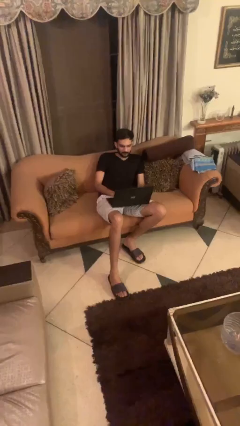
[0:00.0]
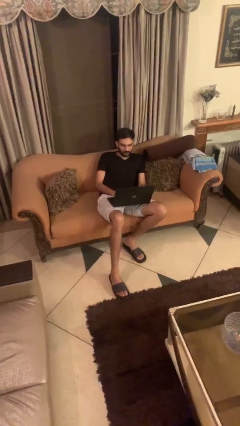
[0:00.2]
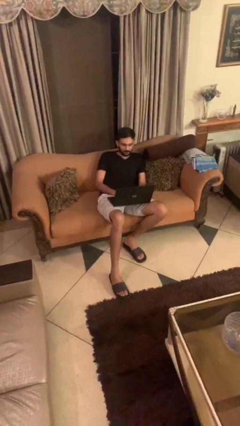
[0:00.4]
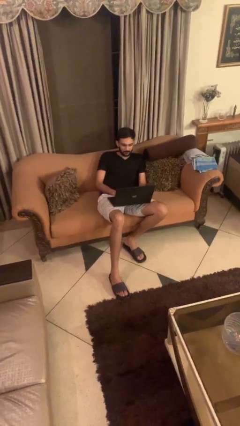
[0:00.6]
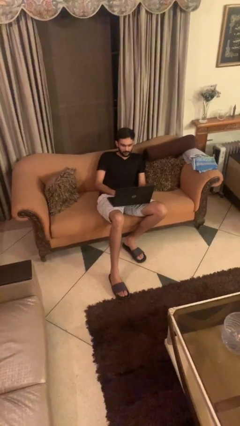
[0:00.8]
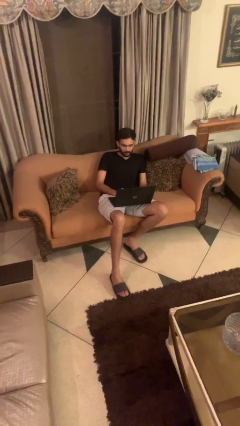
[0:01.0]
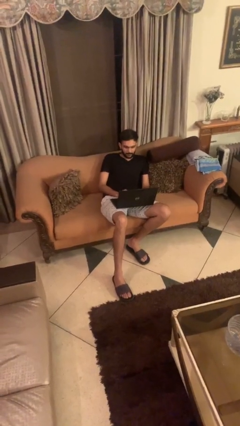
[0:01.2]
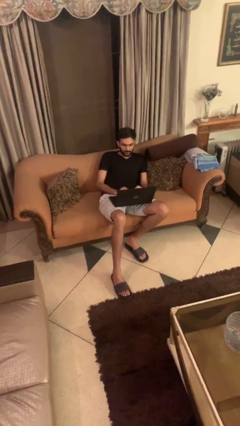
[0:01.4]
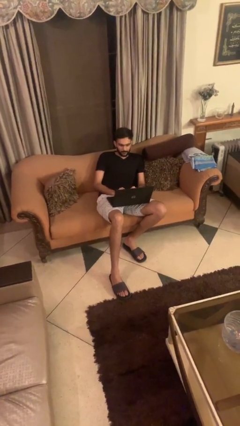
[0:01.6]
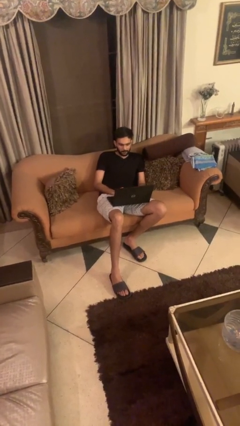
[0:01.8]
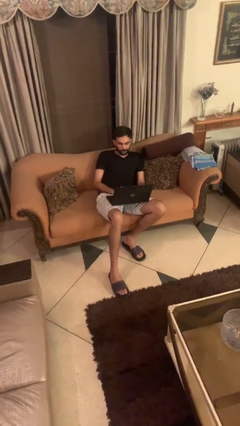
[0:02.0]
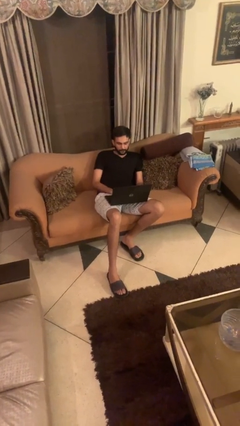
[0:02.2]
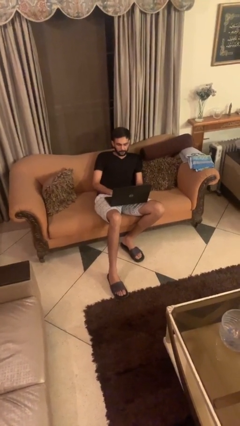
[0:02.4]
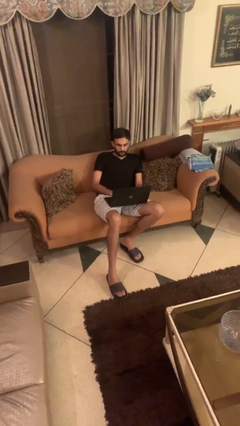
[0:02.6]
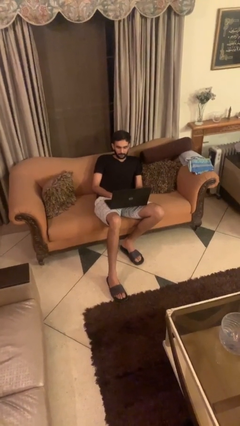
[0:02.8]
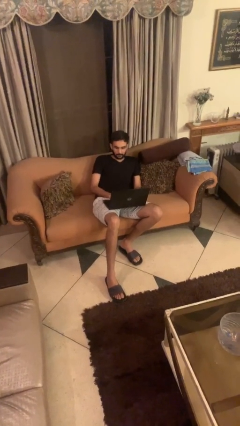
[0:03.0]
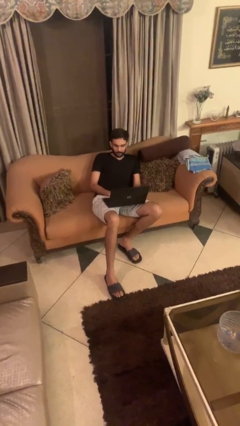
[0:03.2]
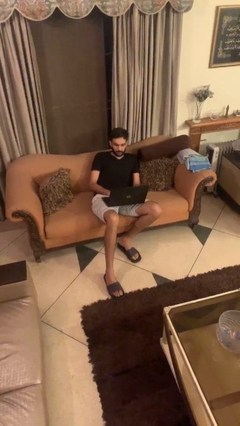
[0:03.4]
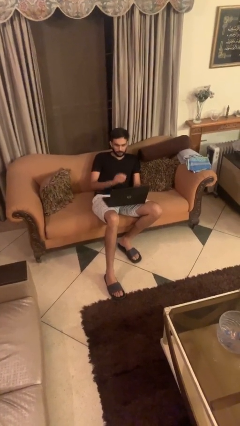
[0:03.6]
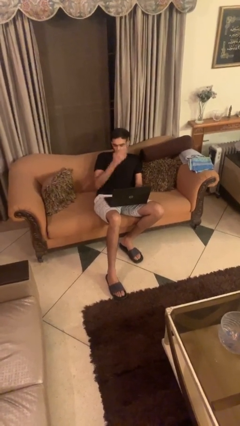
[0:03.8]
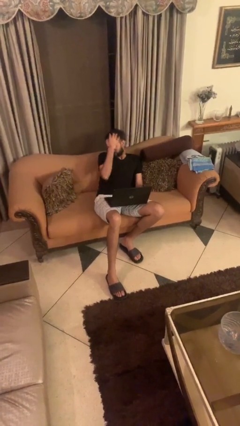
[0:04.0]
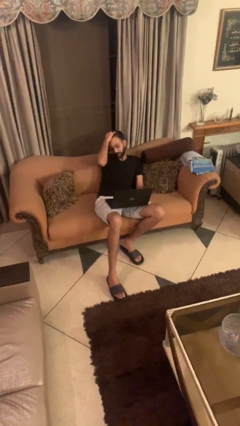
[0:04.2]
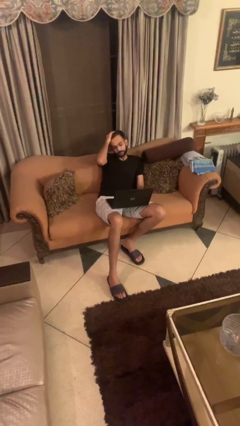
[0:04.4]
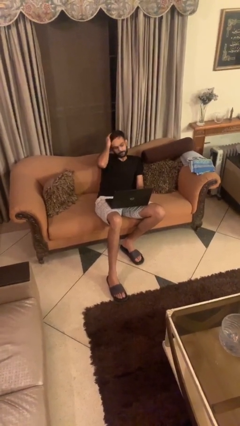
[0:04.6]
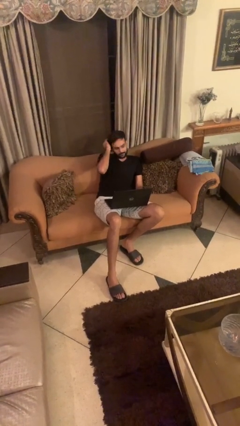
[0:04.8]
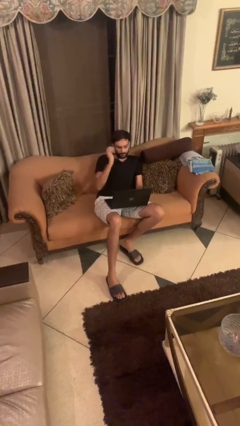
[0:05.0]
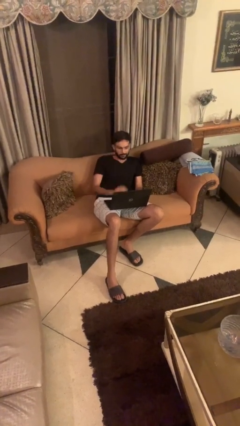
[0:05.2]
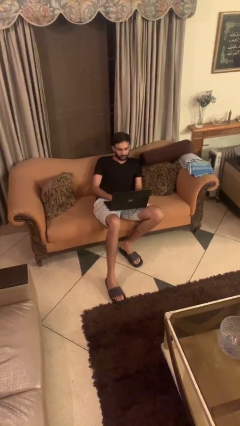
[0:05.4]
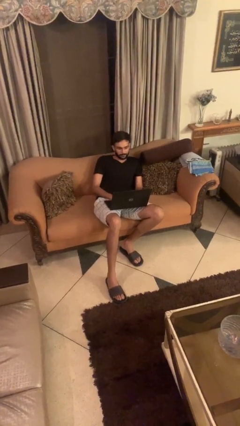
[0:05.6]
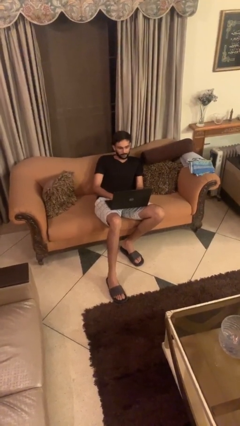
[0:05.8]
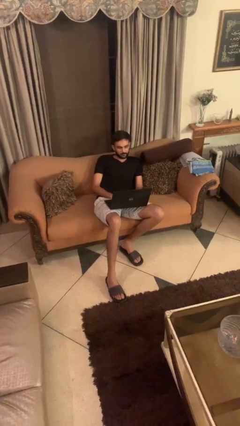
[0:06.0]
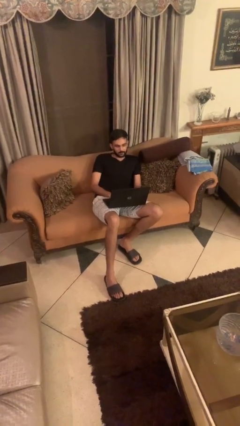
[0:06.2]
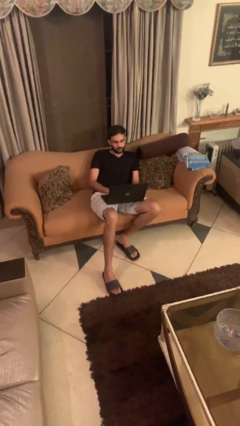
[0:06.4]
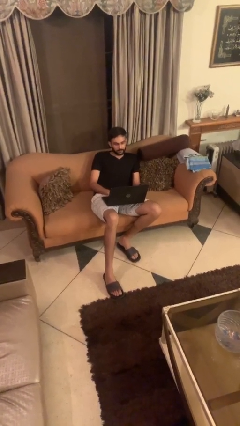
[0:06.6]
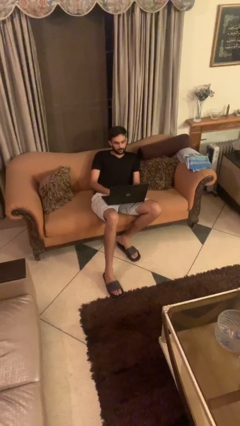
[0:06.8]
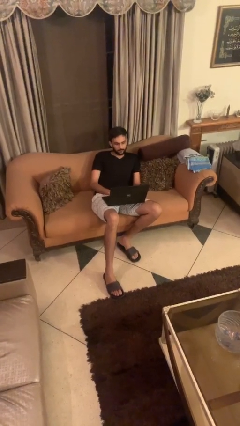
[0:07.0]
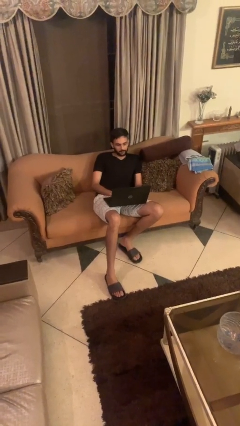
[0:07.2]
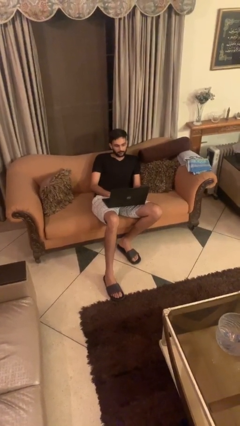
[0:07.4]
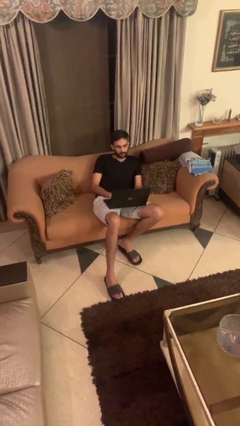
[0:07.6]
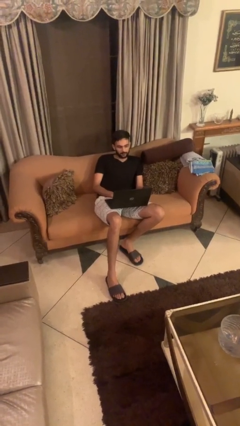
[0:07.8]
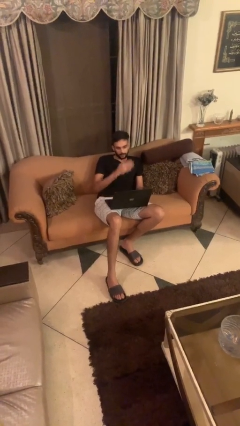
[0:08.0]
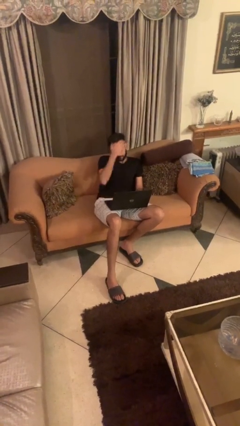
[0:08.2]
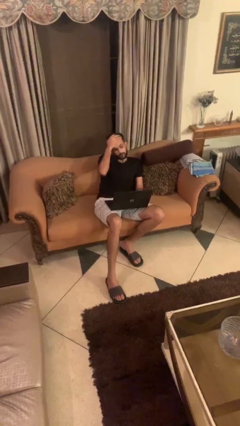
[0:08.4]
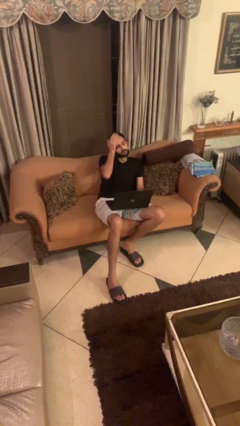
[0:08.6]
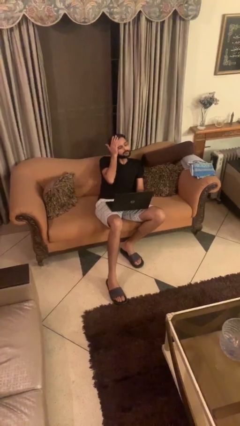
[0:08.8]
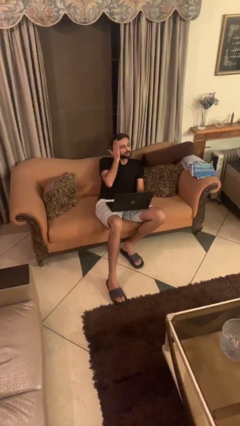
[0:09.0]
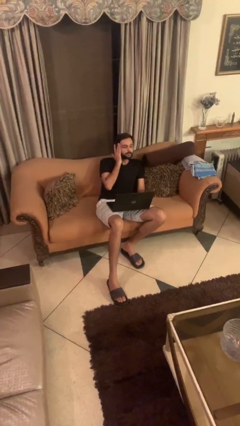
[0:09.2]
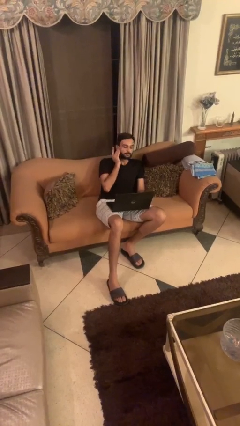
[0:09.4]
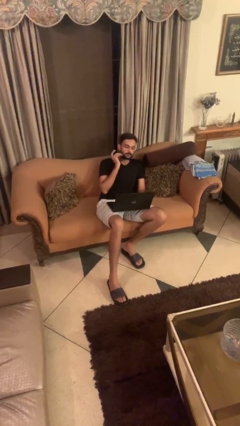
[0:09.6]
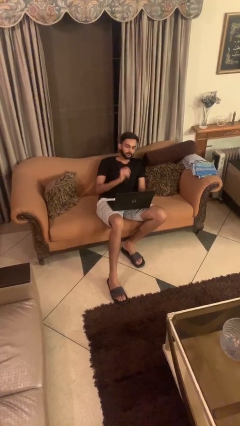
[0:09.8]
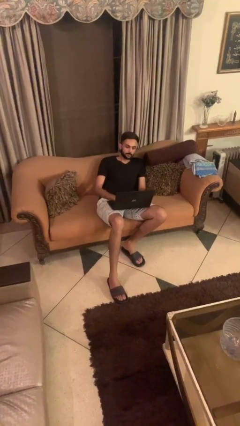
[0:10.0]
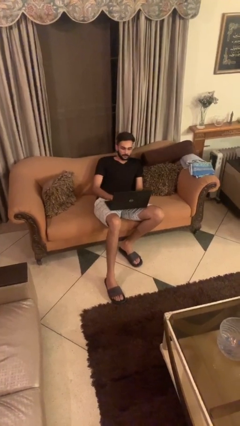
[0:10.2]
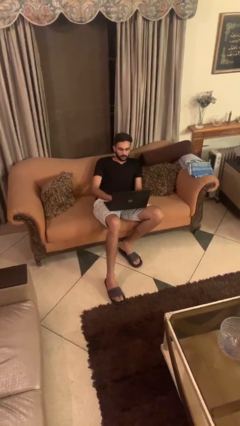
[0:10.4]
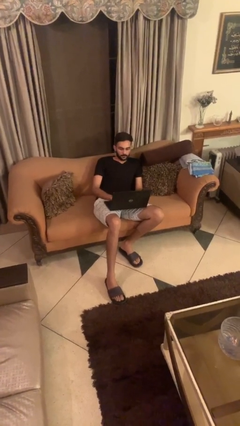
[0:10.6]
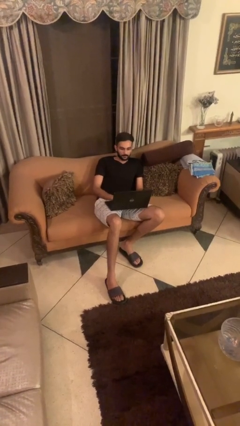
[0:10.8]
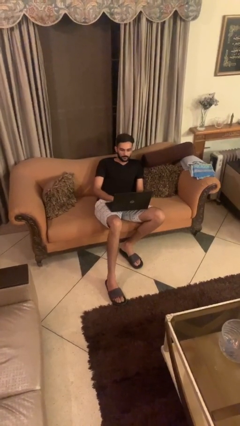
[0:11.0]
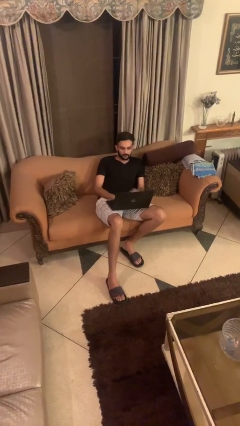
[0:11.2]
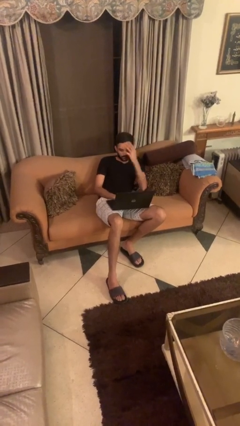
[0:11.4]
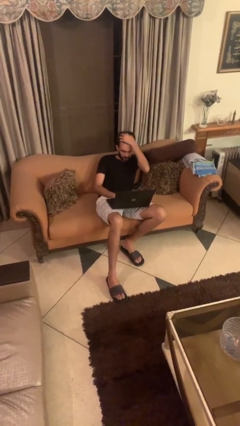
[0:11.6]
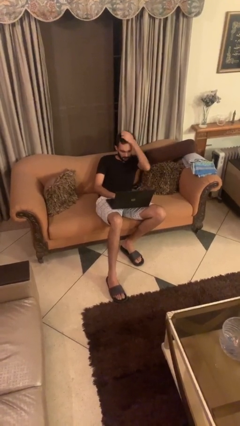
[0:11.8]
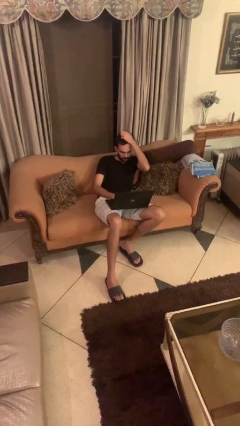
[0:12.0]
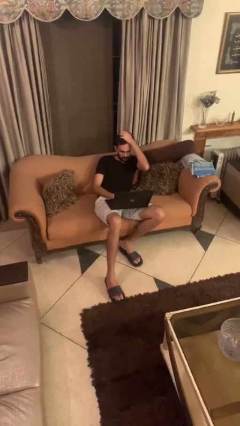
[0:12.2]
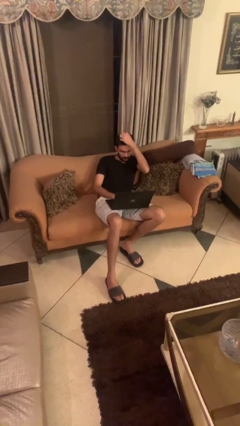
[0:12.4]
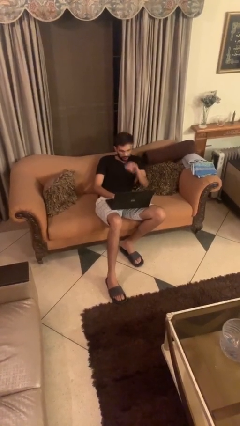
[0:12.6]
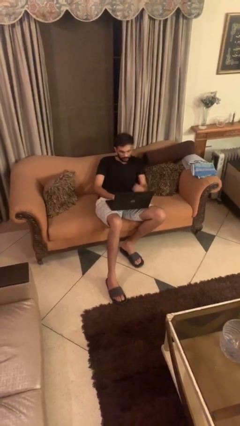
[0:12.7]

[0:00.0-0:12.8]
person interacts with laptop

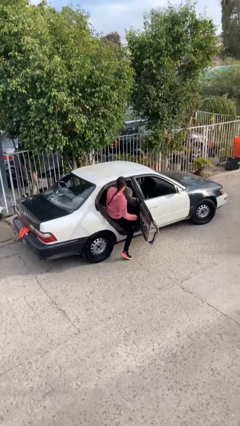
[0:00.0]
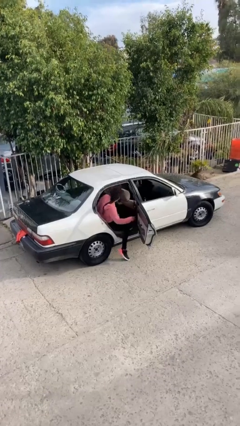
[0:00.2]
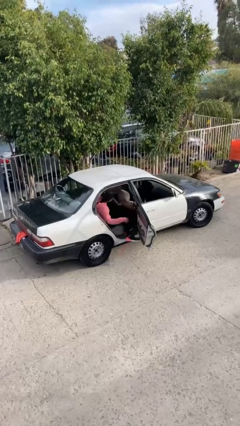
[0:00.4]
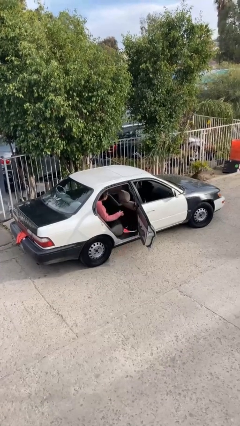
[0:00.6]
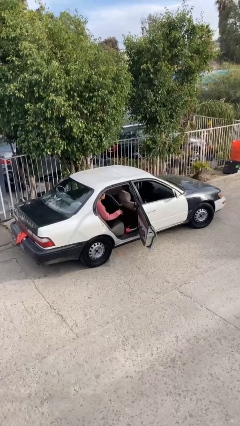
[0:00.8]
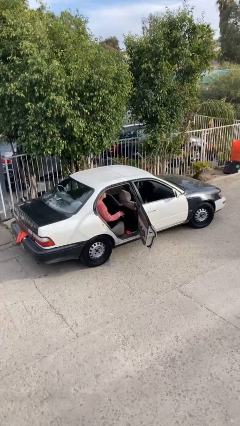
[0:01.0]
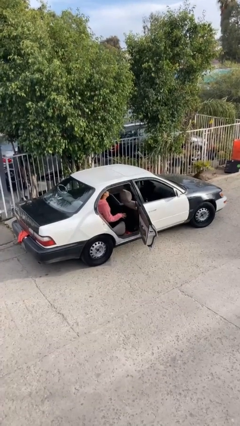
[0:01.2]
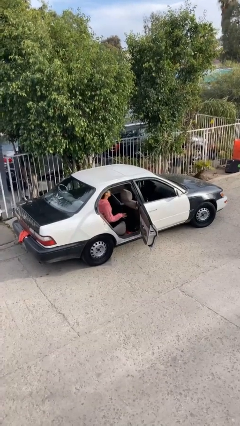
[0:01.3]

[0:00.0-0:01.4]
person enters car

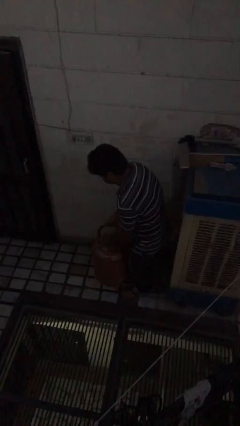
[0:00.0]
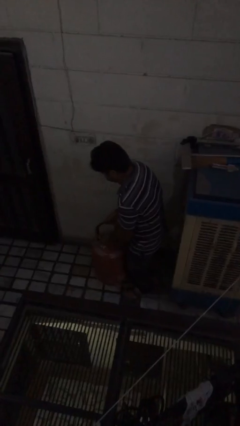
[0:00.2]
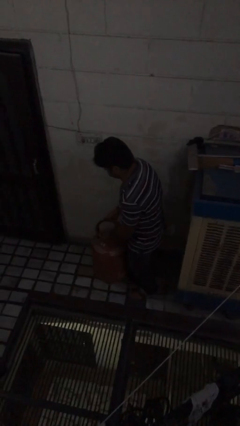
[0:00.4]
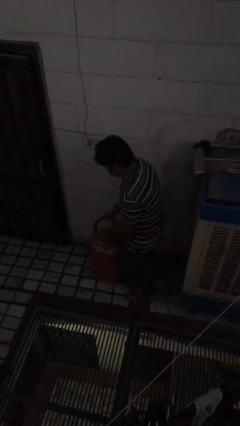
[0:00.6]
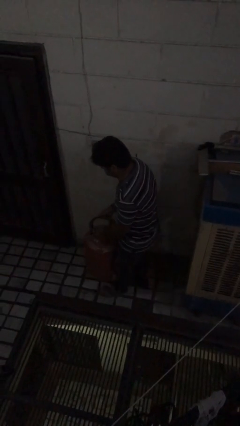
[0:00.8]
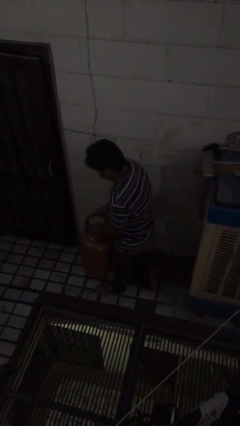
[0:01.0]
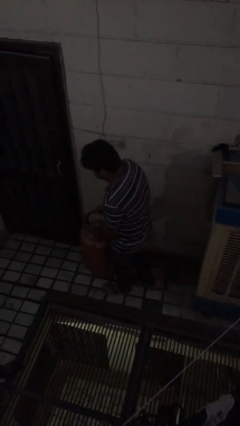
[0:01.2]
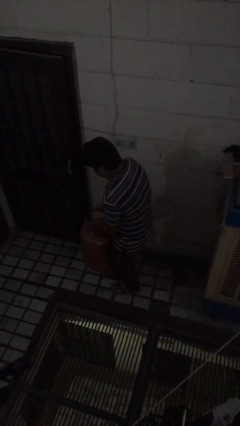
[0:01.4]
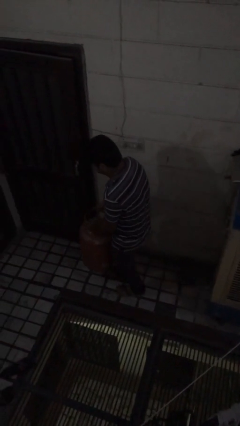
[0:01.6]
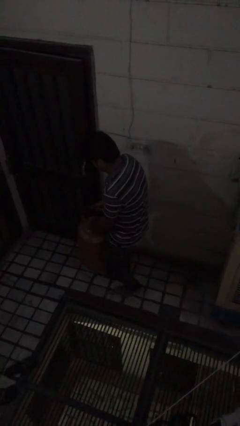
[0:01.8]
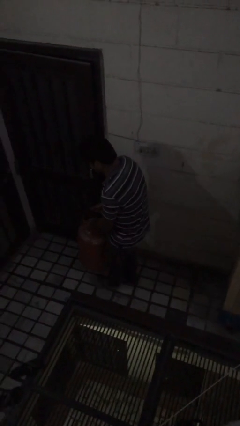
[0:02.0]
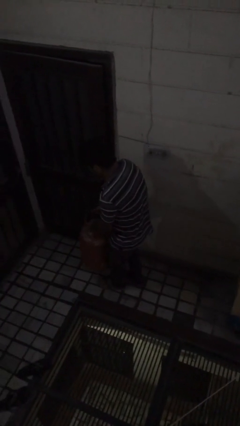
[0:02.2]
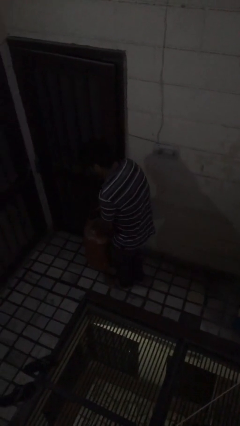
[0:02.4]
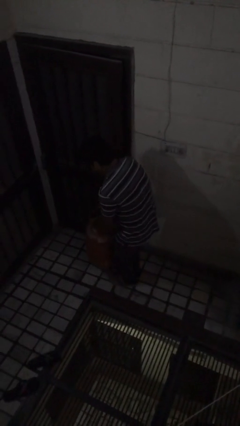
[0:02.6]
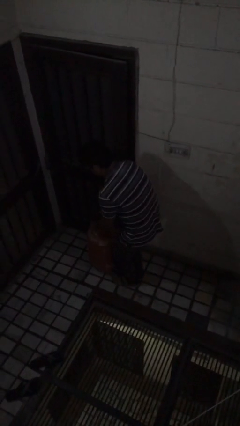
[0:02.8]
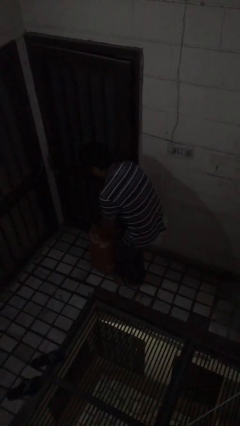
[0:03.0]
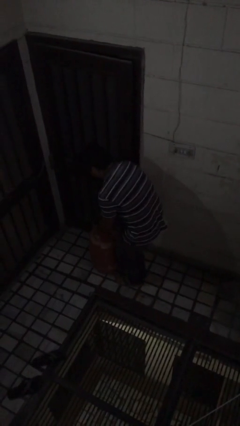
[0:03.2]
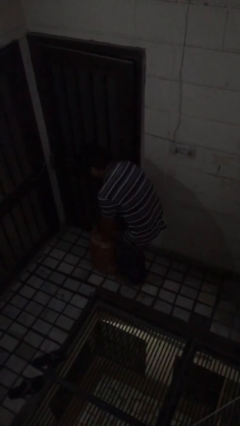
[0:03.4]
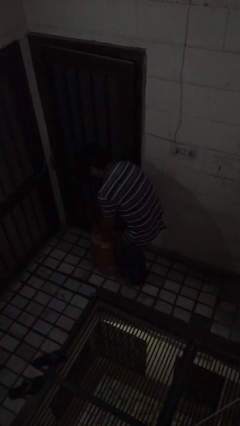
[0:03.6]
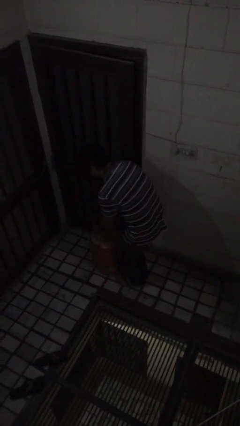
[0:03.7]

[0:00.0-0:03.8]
person carries heavy object
